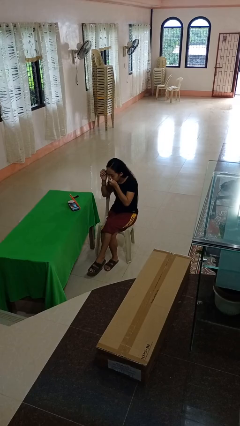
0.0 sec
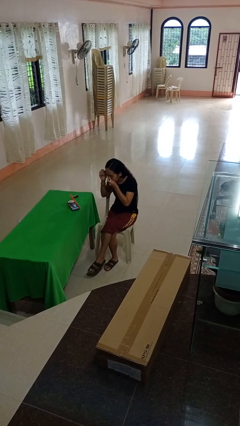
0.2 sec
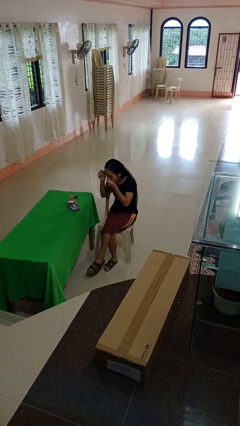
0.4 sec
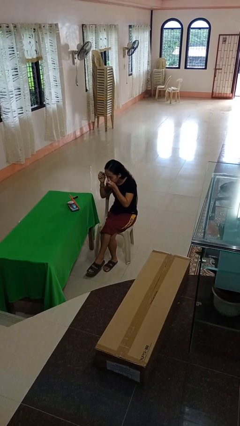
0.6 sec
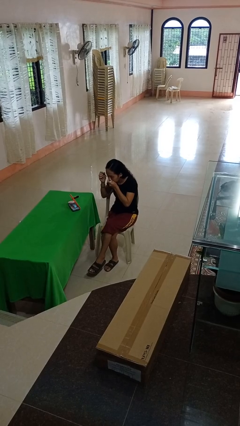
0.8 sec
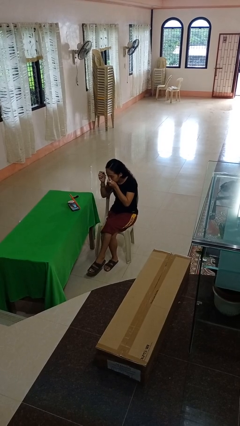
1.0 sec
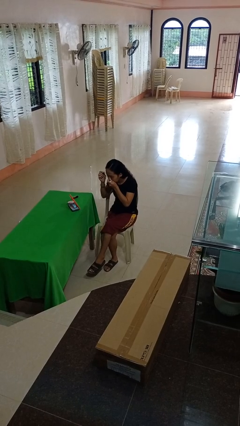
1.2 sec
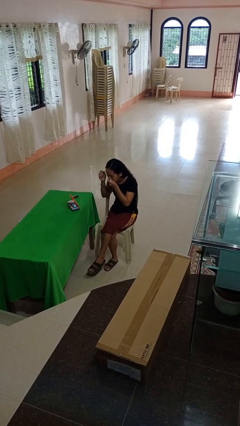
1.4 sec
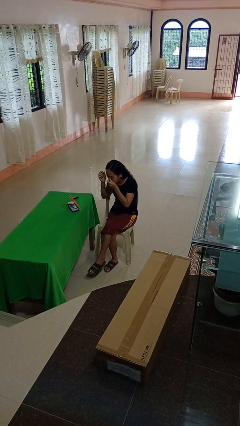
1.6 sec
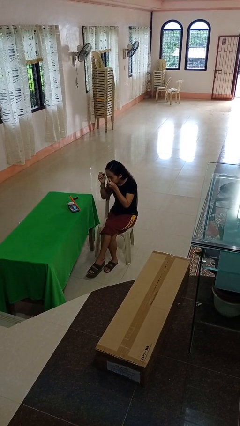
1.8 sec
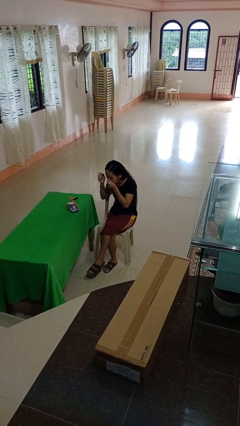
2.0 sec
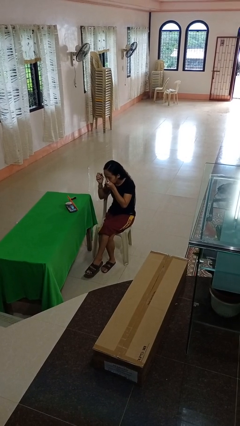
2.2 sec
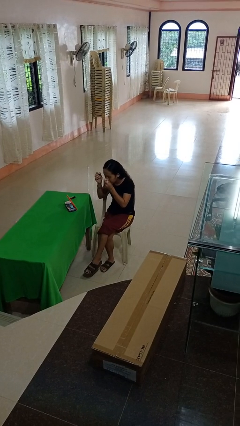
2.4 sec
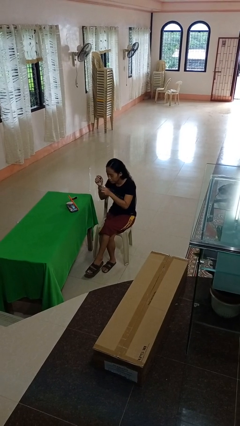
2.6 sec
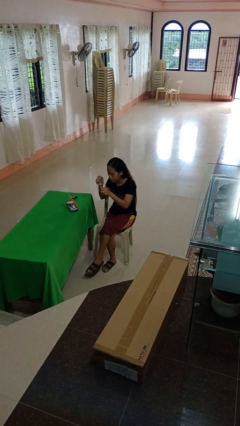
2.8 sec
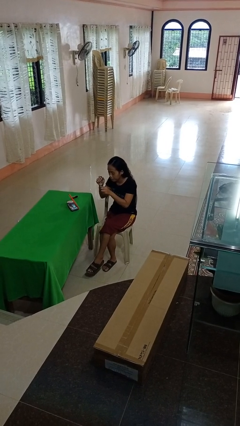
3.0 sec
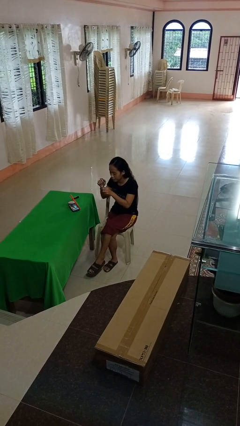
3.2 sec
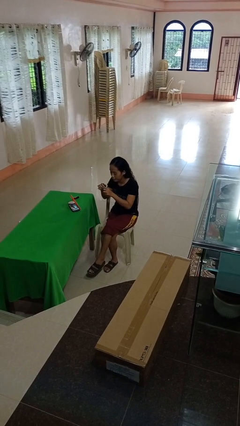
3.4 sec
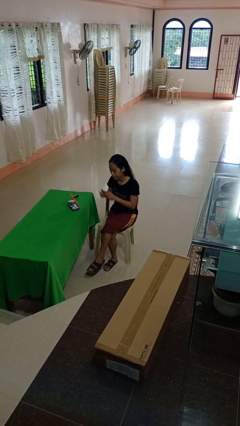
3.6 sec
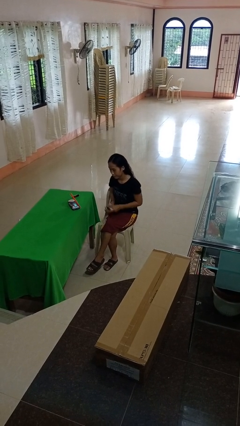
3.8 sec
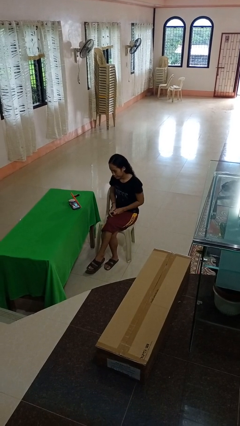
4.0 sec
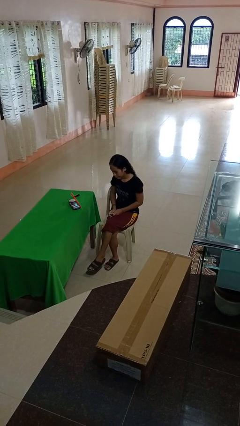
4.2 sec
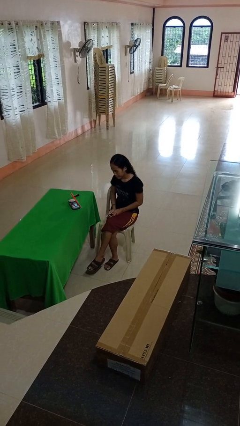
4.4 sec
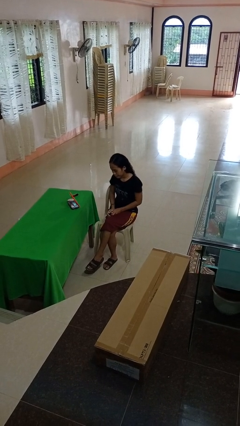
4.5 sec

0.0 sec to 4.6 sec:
person applies eye makeup

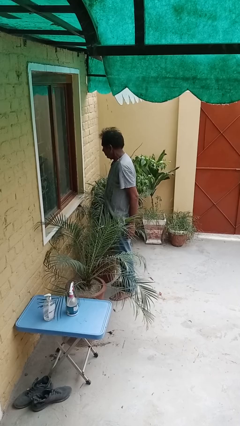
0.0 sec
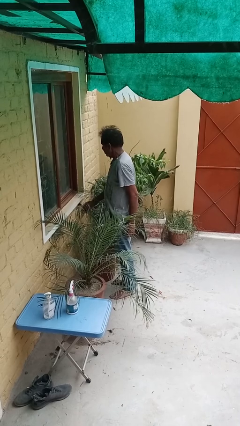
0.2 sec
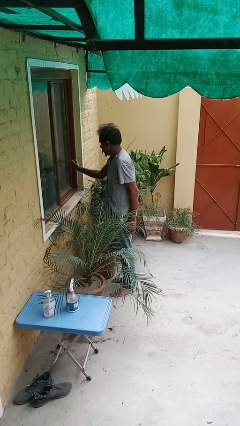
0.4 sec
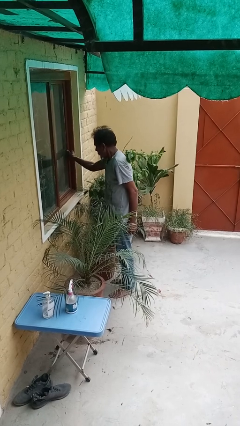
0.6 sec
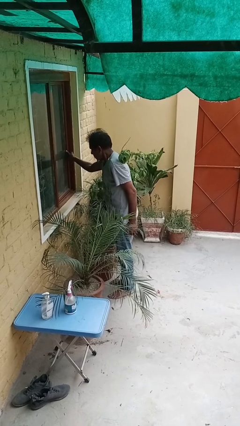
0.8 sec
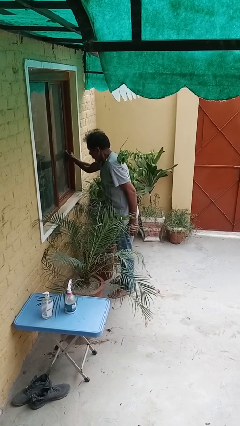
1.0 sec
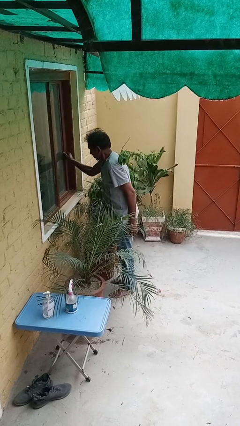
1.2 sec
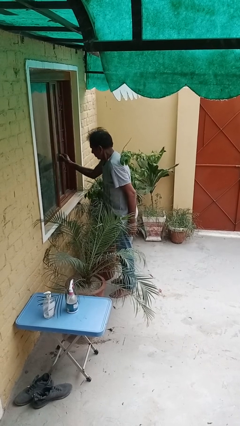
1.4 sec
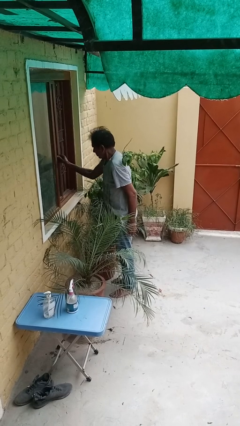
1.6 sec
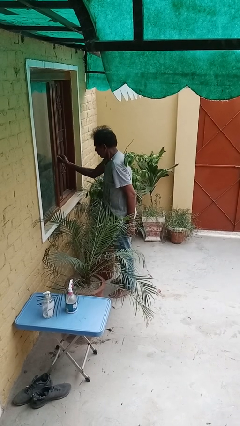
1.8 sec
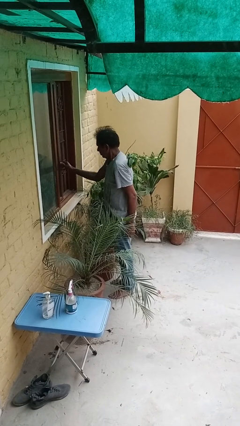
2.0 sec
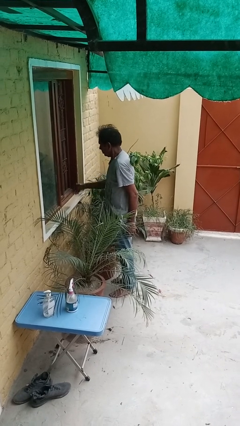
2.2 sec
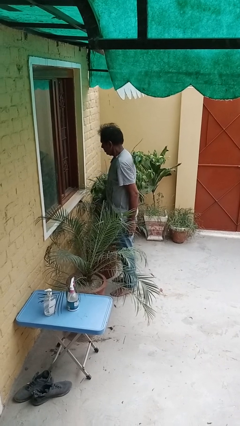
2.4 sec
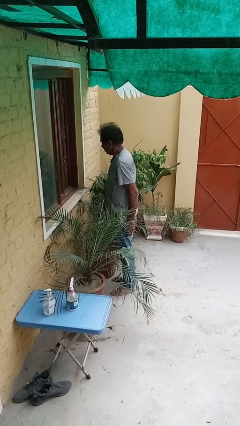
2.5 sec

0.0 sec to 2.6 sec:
person opens home window

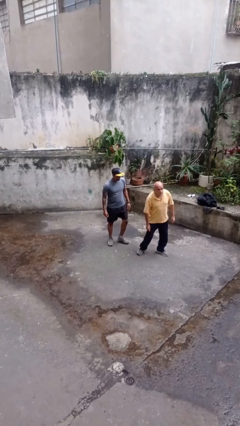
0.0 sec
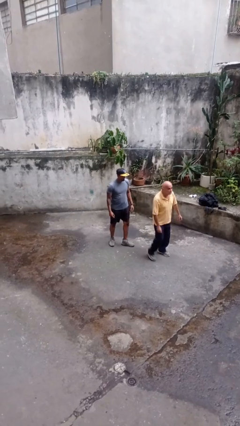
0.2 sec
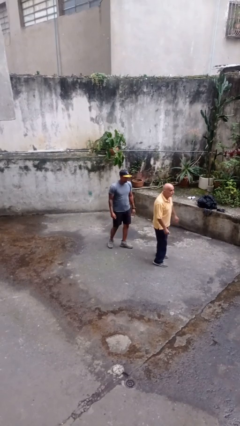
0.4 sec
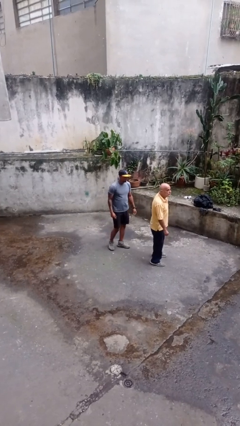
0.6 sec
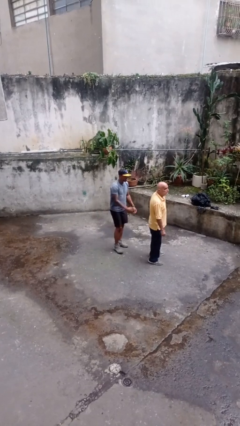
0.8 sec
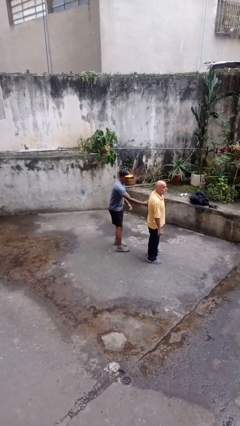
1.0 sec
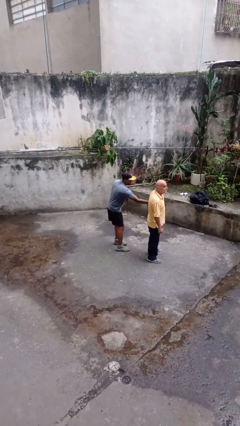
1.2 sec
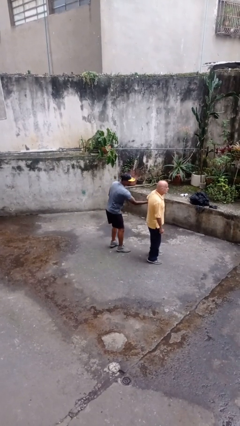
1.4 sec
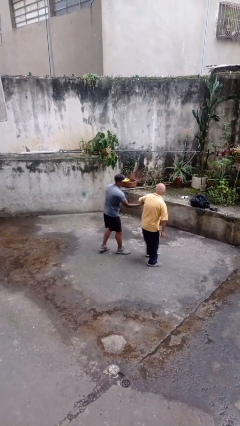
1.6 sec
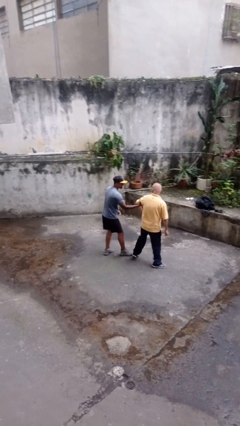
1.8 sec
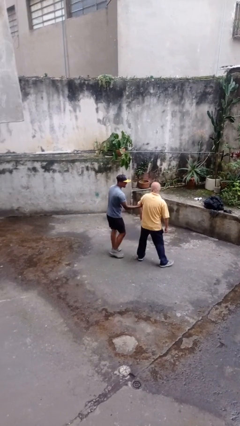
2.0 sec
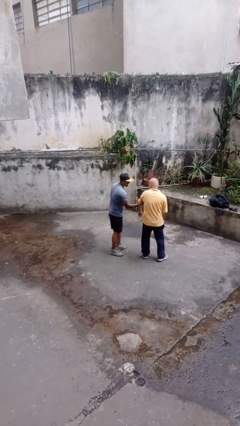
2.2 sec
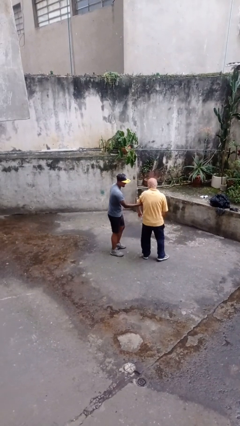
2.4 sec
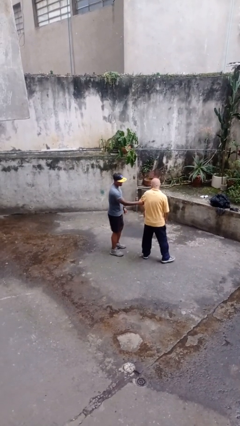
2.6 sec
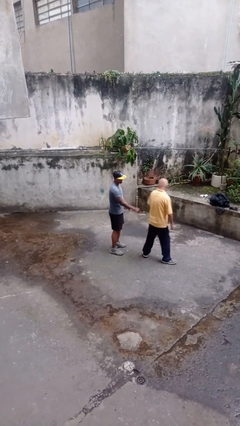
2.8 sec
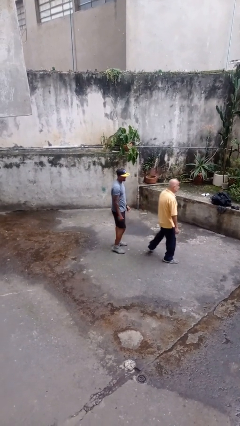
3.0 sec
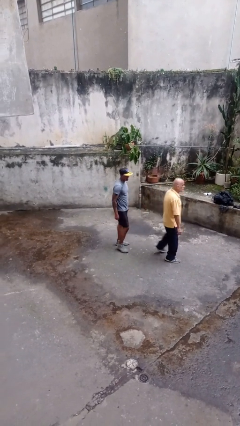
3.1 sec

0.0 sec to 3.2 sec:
person grabs person by bicep

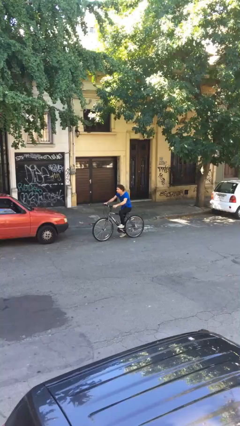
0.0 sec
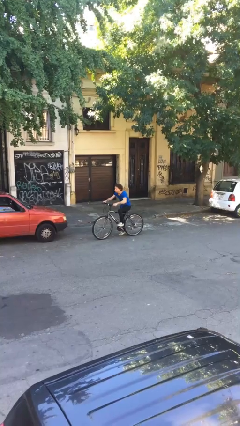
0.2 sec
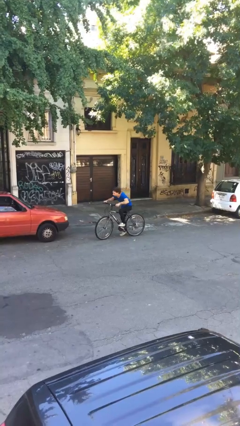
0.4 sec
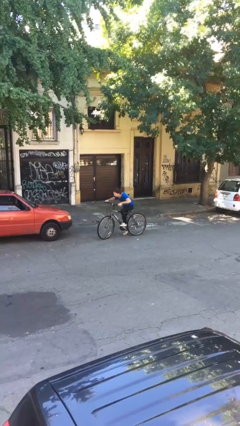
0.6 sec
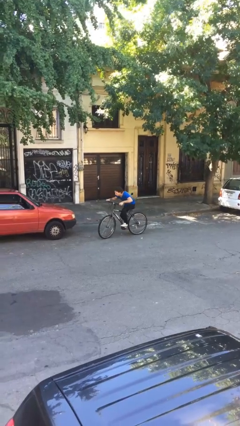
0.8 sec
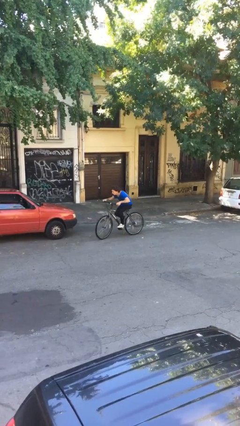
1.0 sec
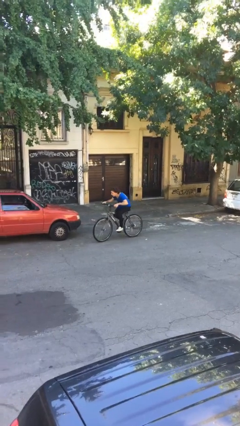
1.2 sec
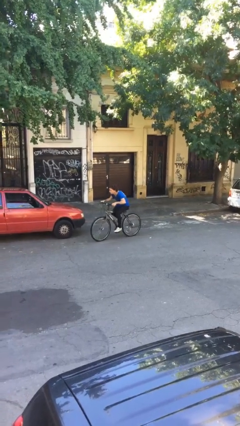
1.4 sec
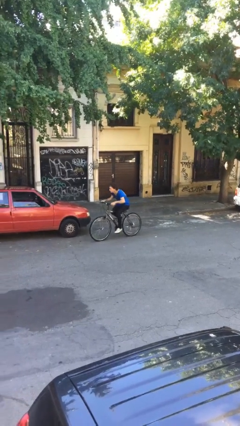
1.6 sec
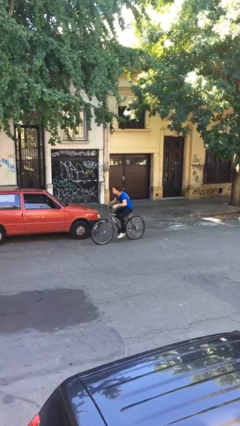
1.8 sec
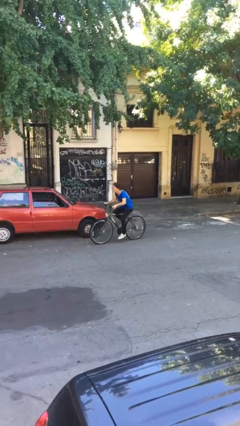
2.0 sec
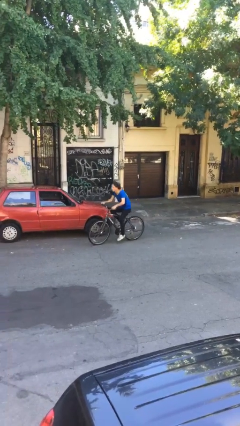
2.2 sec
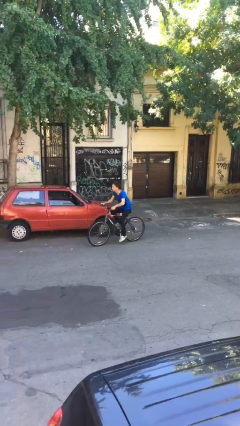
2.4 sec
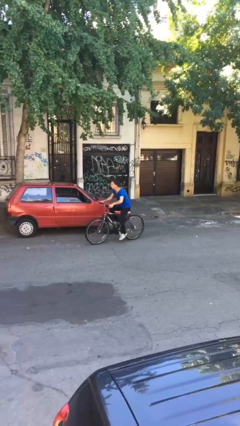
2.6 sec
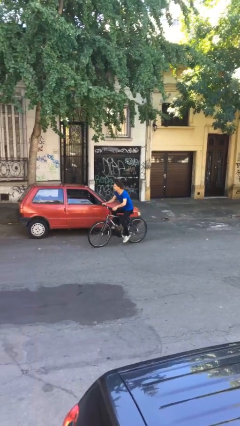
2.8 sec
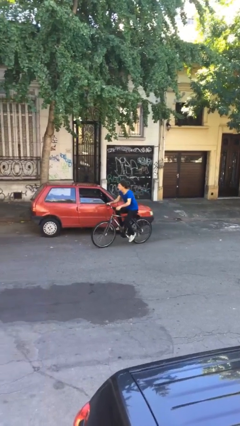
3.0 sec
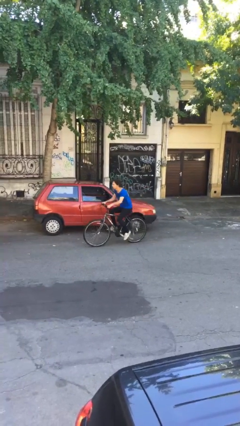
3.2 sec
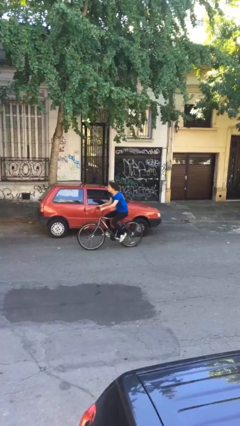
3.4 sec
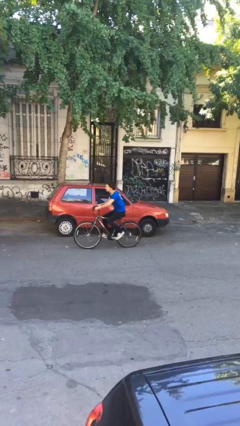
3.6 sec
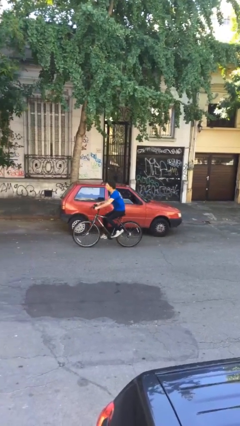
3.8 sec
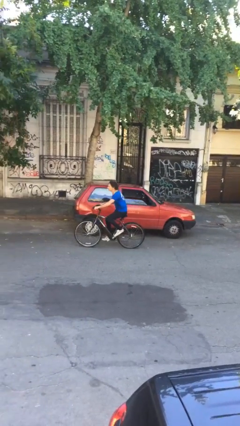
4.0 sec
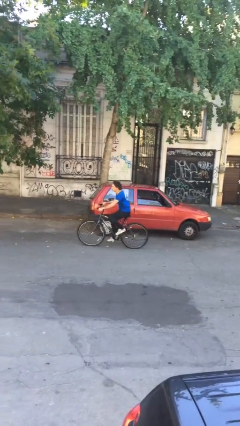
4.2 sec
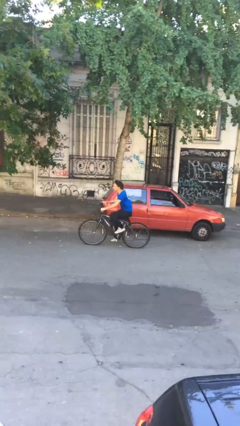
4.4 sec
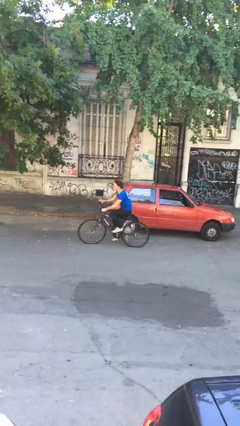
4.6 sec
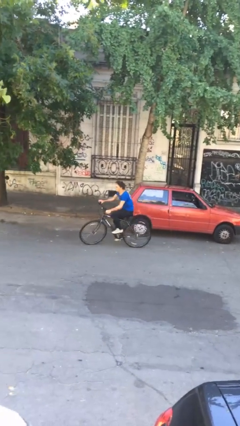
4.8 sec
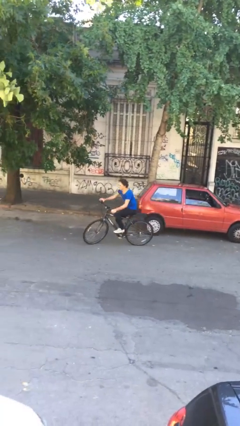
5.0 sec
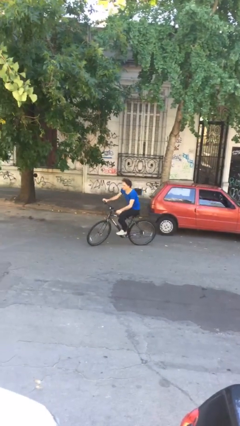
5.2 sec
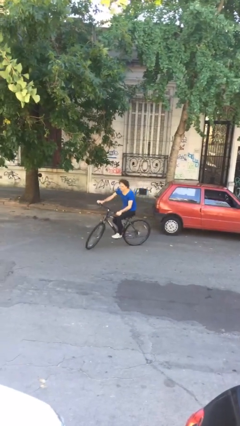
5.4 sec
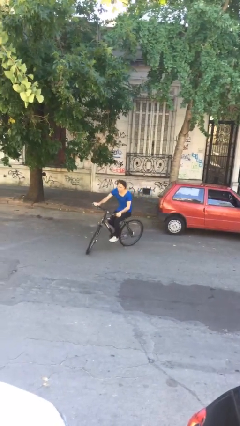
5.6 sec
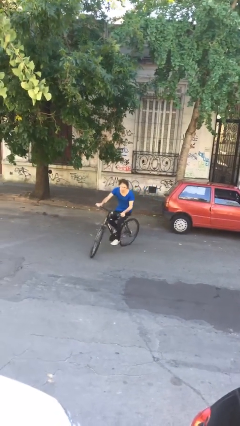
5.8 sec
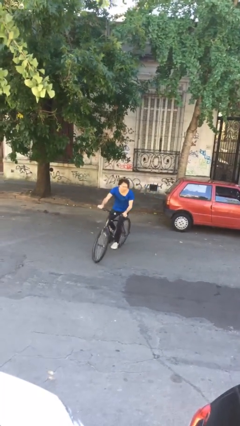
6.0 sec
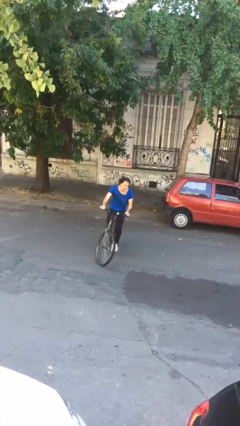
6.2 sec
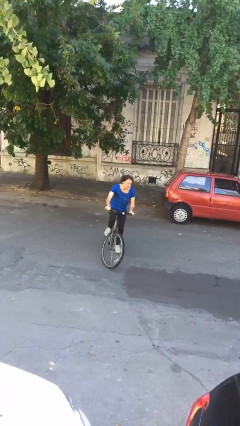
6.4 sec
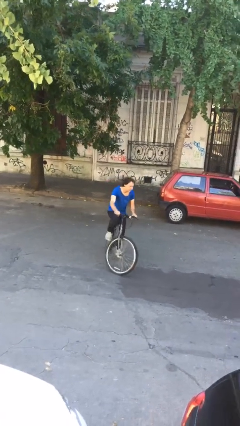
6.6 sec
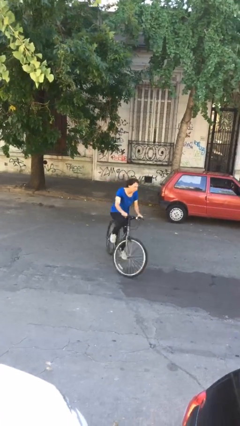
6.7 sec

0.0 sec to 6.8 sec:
person rides bicycle

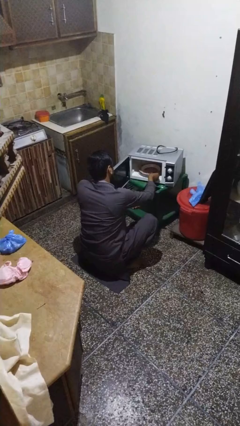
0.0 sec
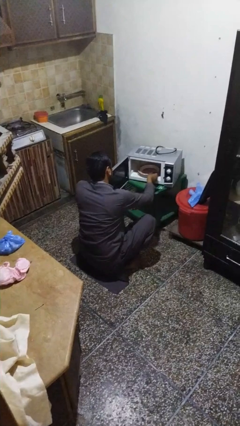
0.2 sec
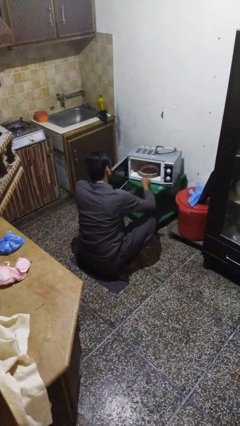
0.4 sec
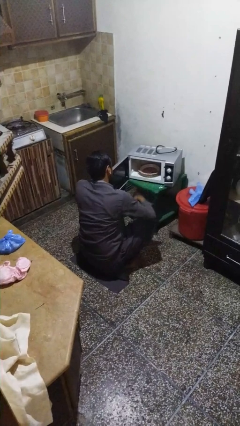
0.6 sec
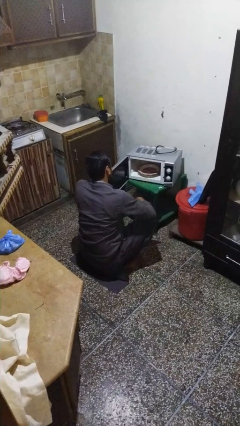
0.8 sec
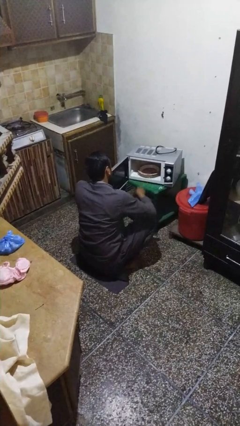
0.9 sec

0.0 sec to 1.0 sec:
person takes object from microwave
